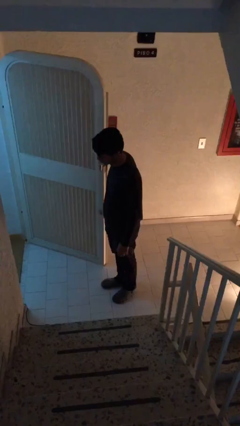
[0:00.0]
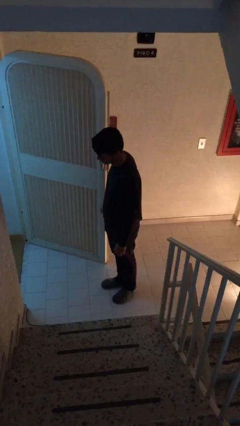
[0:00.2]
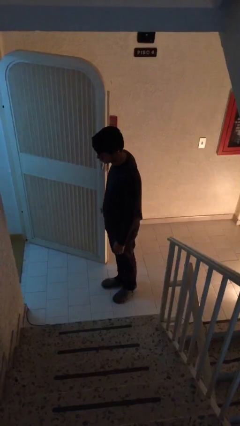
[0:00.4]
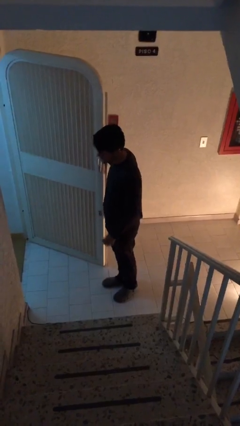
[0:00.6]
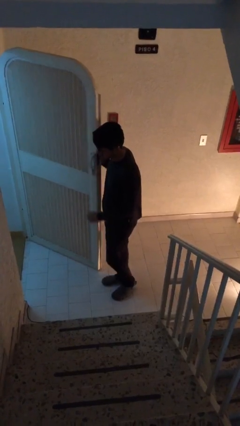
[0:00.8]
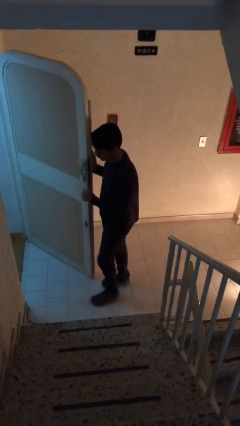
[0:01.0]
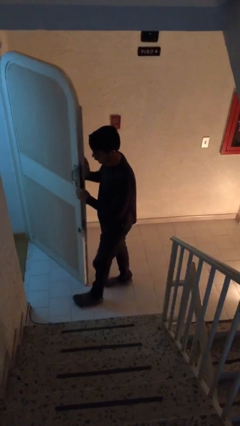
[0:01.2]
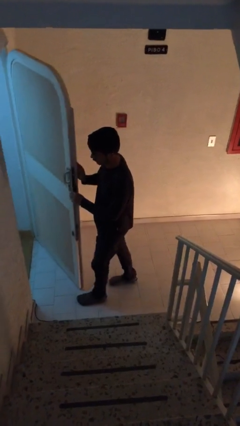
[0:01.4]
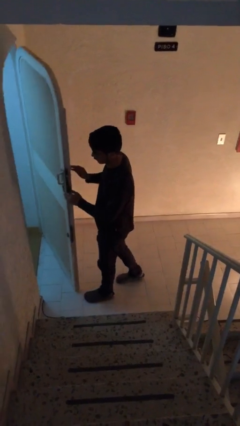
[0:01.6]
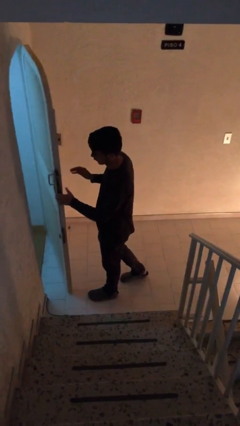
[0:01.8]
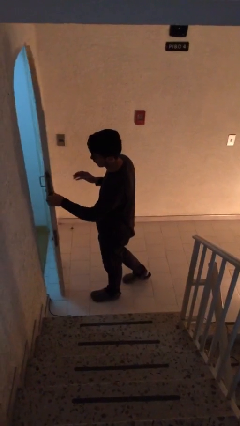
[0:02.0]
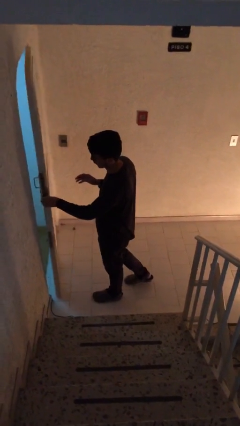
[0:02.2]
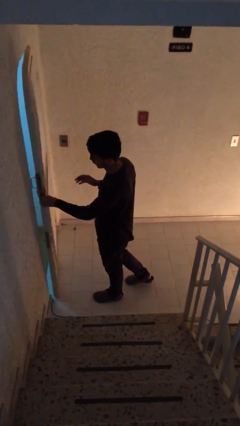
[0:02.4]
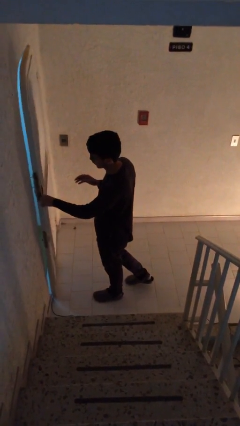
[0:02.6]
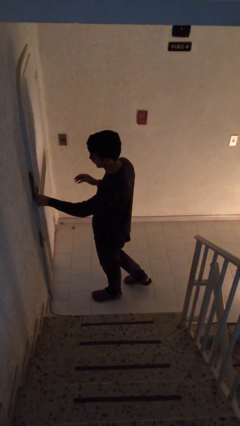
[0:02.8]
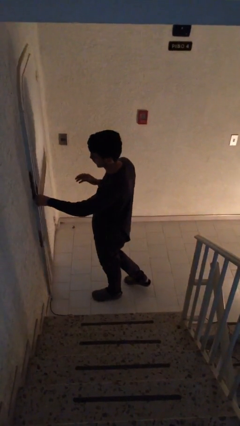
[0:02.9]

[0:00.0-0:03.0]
person closes facility door

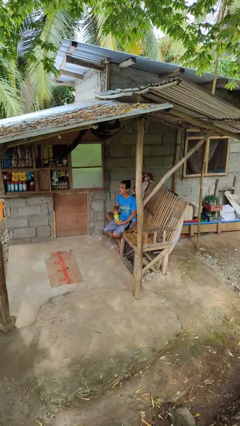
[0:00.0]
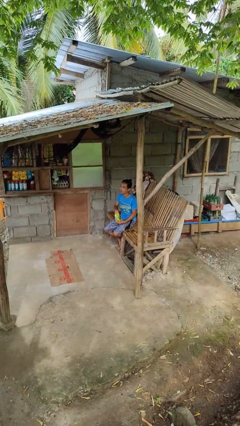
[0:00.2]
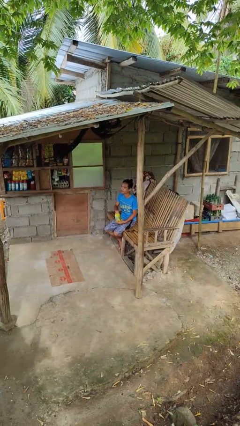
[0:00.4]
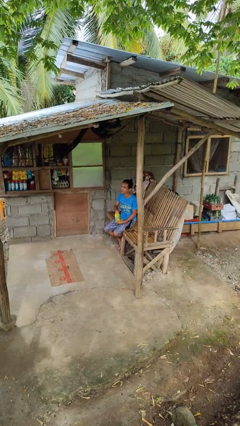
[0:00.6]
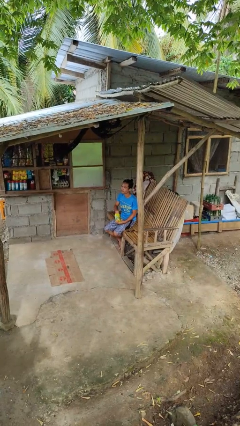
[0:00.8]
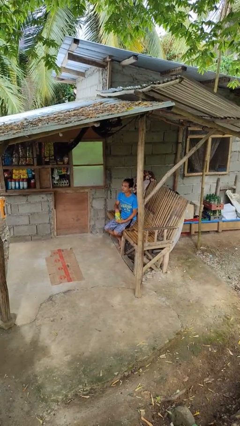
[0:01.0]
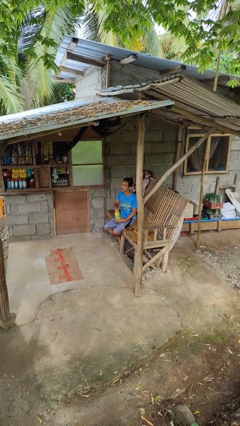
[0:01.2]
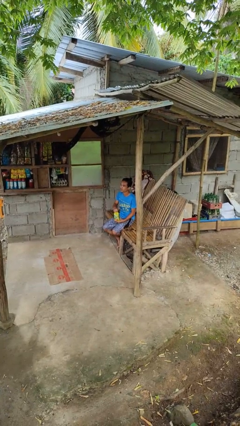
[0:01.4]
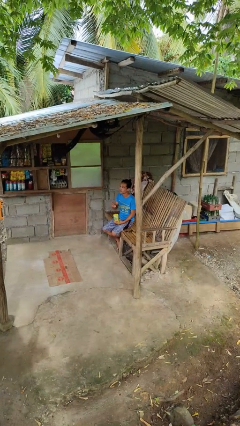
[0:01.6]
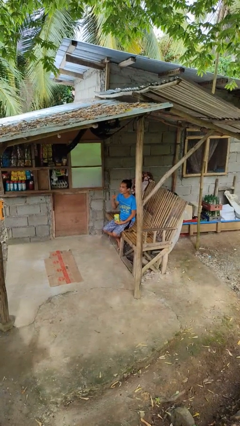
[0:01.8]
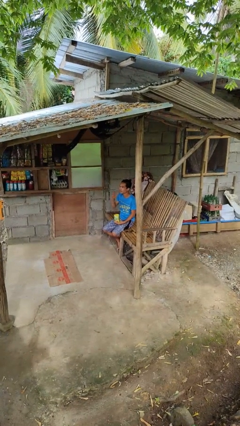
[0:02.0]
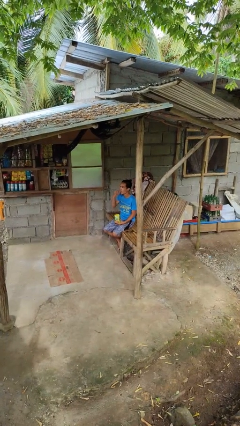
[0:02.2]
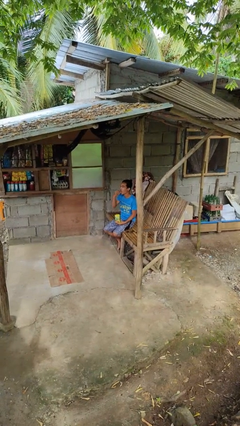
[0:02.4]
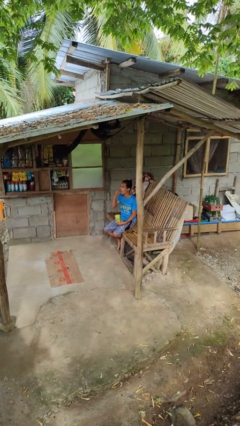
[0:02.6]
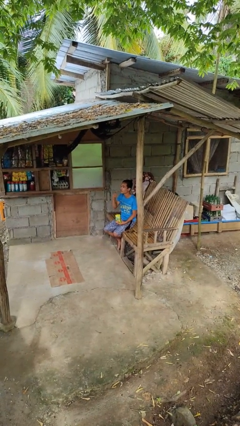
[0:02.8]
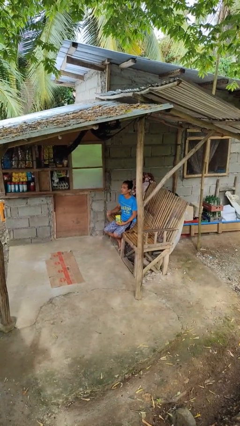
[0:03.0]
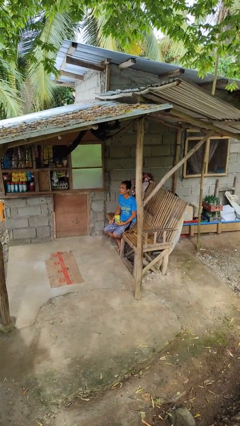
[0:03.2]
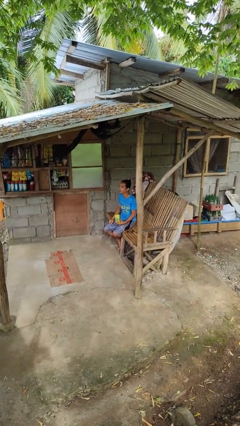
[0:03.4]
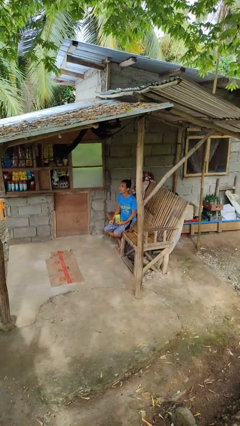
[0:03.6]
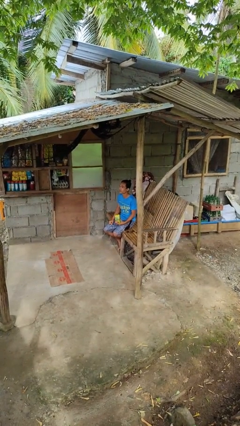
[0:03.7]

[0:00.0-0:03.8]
person eats snack from bag

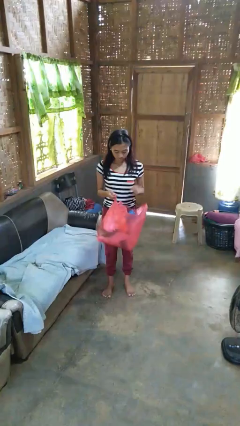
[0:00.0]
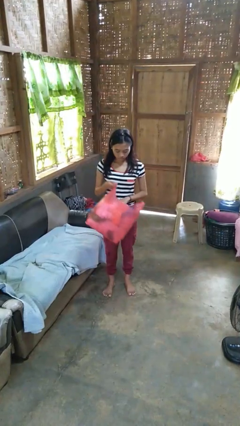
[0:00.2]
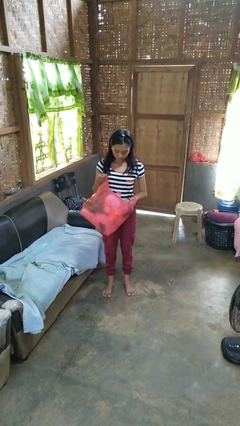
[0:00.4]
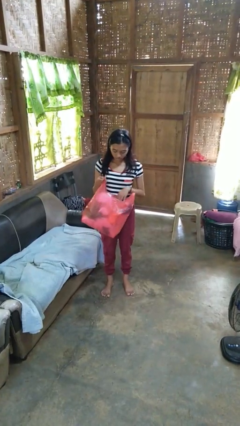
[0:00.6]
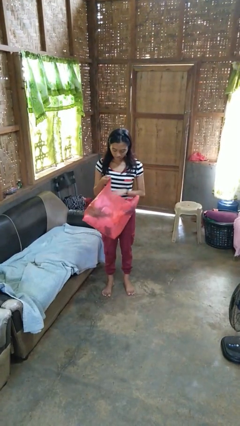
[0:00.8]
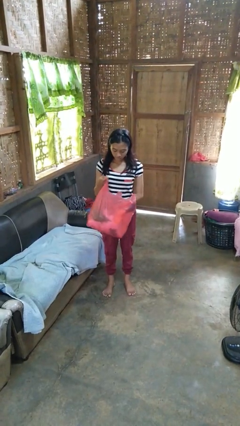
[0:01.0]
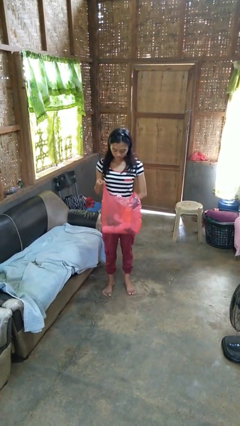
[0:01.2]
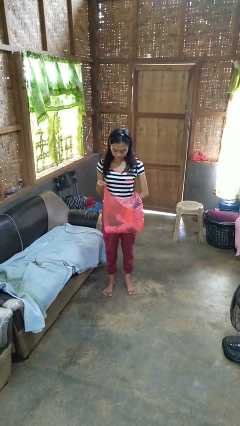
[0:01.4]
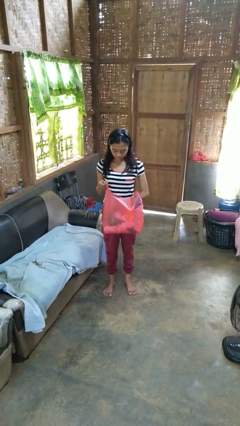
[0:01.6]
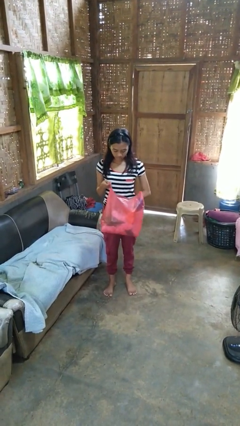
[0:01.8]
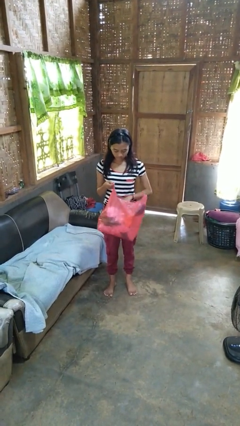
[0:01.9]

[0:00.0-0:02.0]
person searches in bag

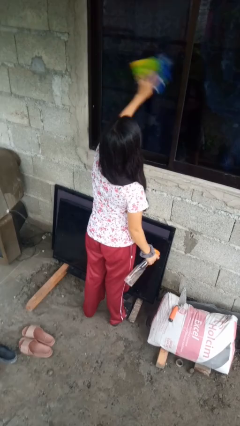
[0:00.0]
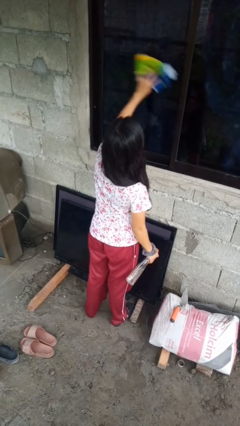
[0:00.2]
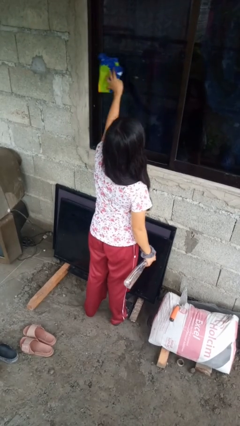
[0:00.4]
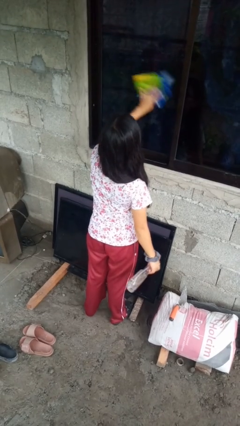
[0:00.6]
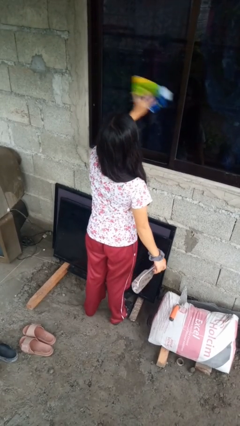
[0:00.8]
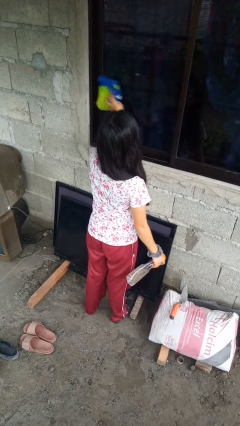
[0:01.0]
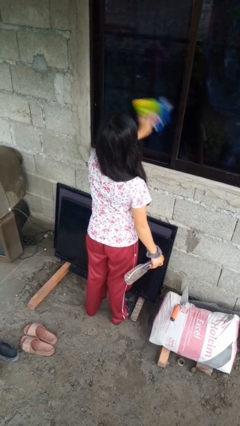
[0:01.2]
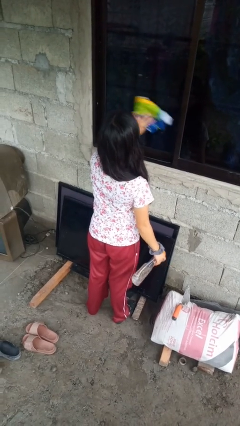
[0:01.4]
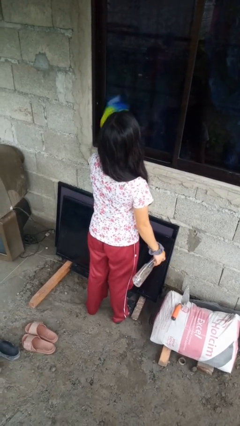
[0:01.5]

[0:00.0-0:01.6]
person washes window

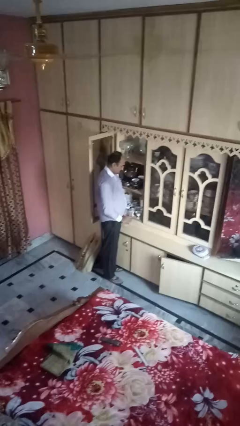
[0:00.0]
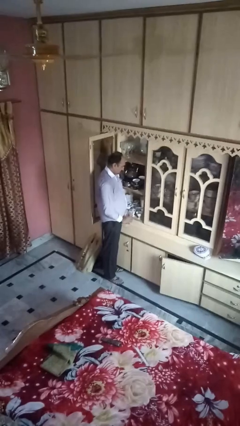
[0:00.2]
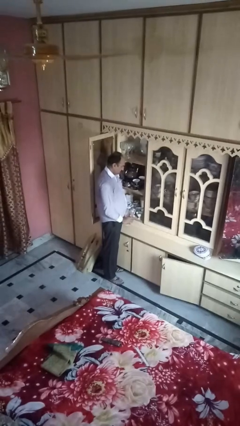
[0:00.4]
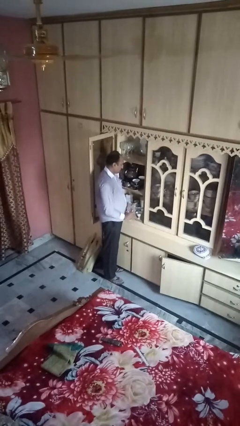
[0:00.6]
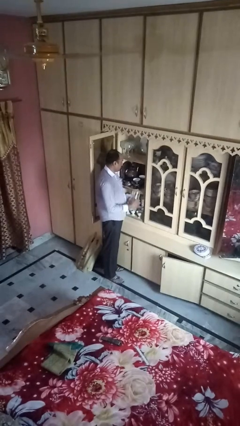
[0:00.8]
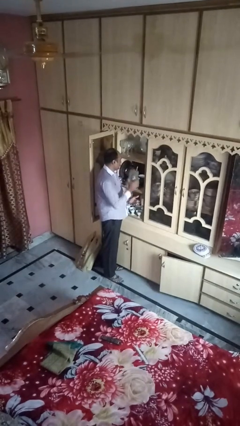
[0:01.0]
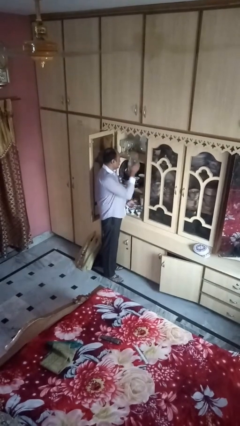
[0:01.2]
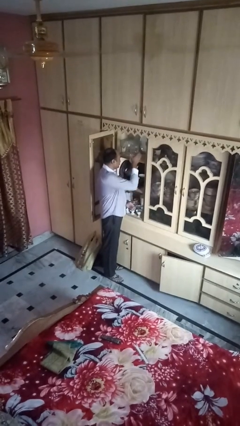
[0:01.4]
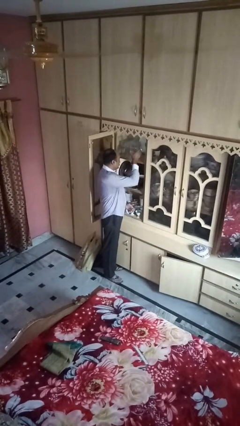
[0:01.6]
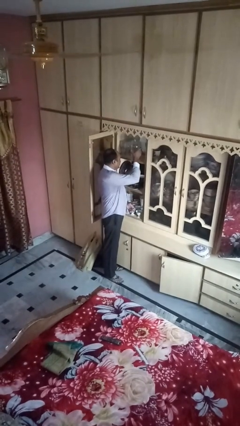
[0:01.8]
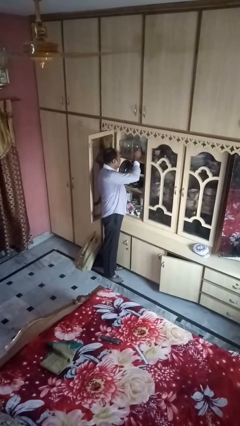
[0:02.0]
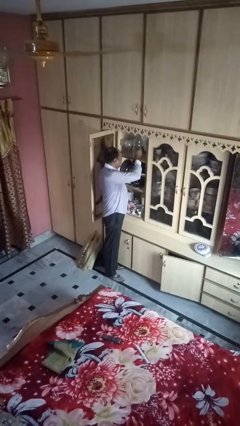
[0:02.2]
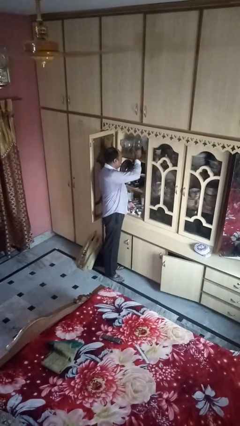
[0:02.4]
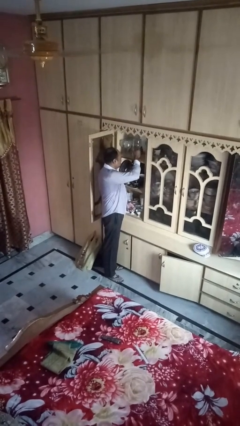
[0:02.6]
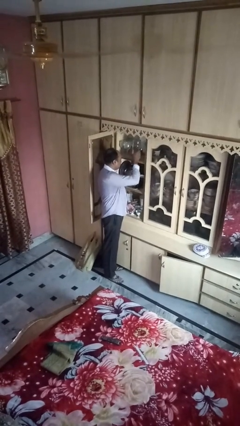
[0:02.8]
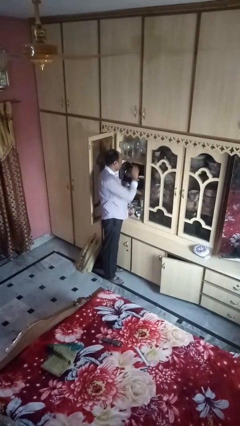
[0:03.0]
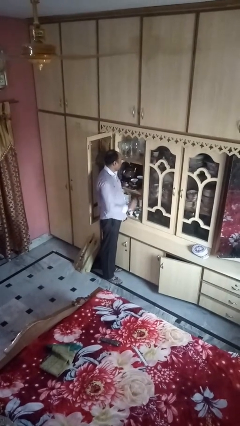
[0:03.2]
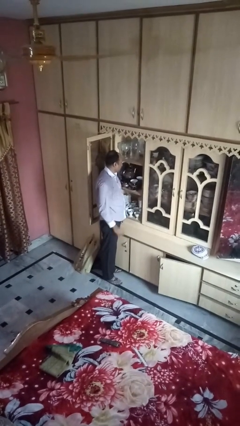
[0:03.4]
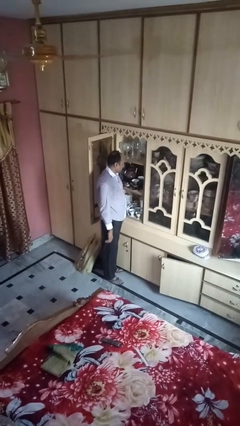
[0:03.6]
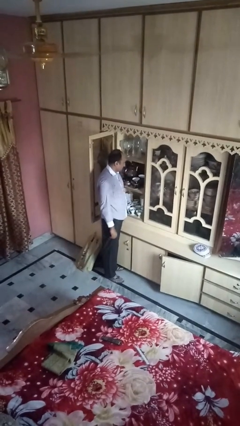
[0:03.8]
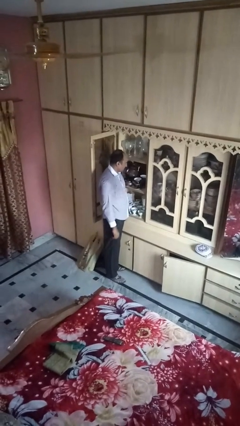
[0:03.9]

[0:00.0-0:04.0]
person puts down object into cabinet

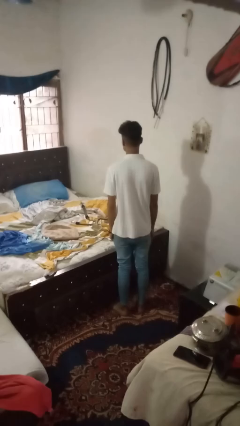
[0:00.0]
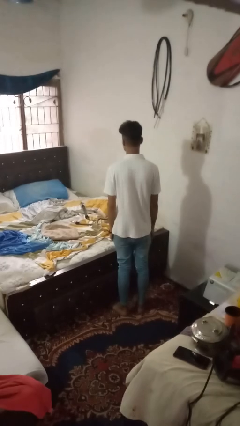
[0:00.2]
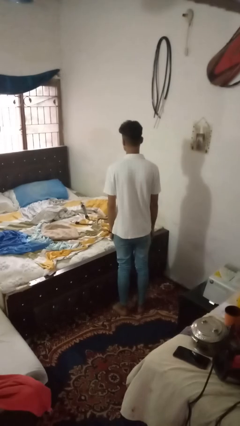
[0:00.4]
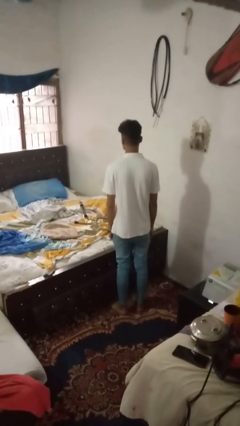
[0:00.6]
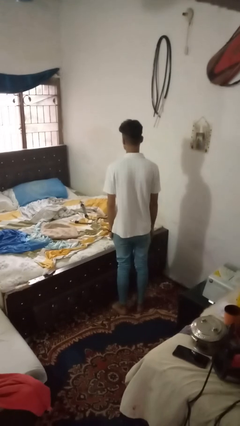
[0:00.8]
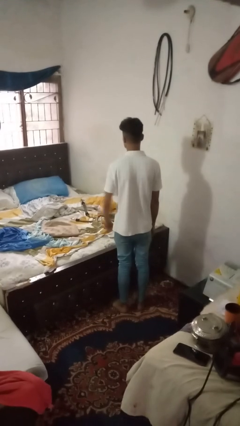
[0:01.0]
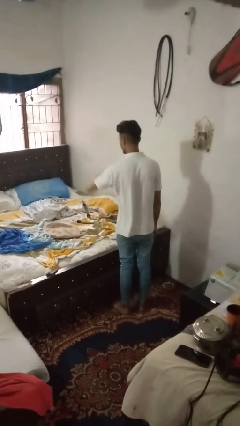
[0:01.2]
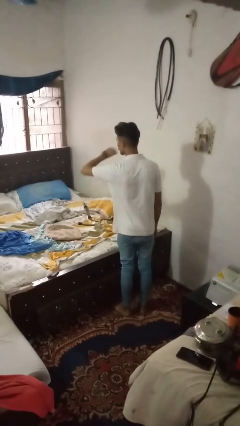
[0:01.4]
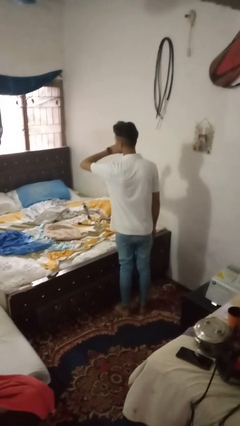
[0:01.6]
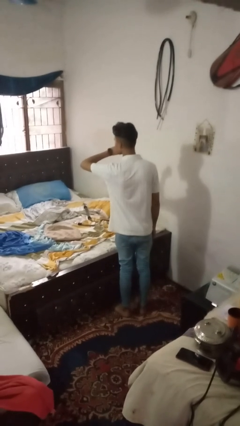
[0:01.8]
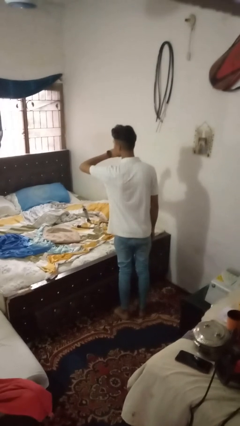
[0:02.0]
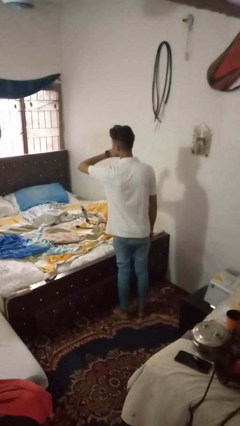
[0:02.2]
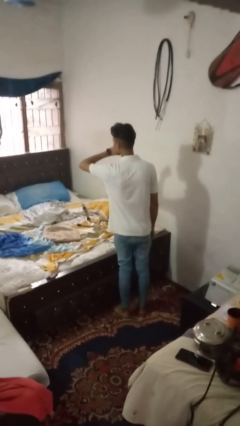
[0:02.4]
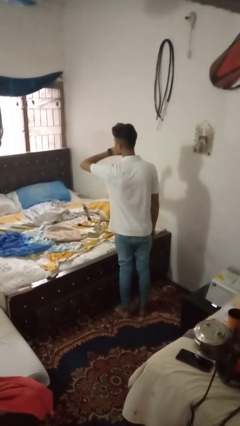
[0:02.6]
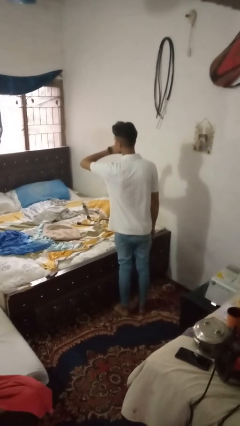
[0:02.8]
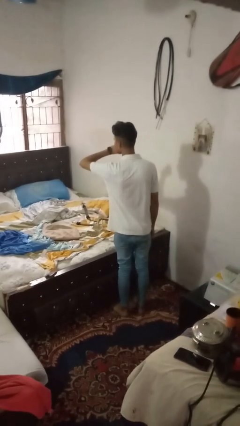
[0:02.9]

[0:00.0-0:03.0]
person gestures watch closely

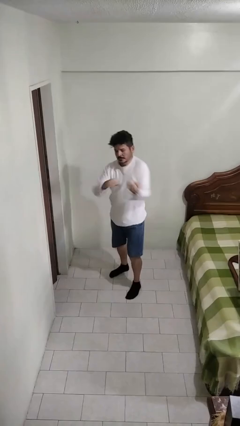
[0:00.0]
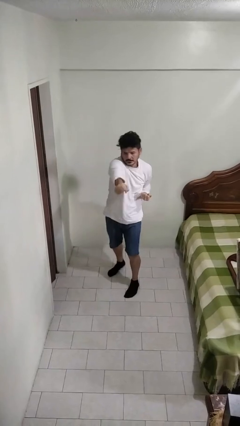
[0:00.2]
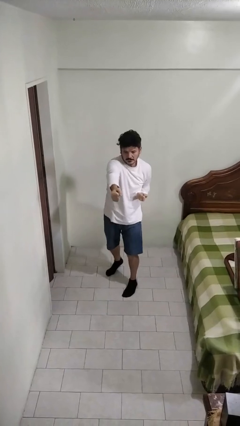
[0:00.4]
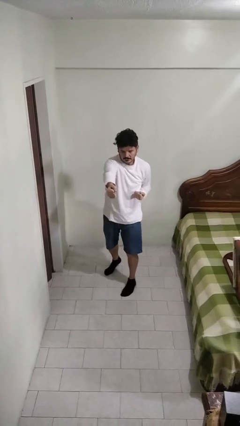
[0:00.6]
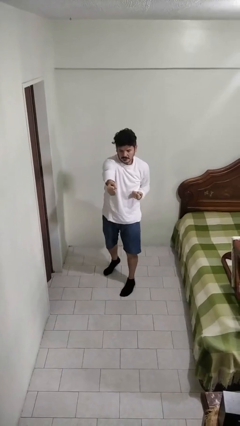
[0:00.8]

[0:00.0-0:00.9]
person karate chop
